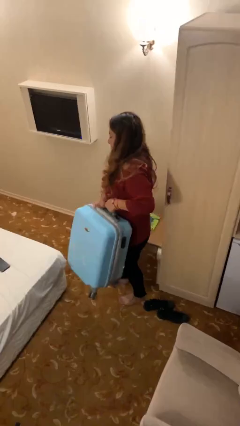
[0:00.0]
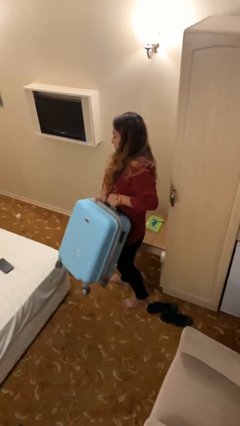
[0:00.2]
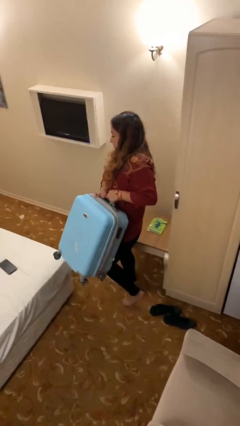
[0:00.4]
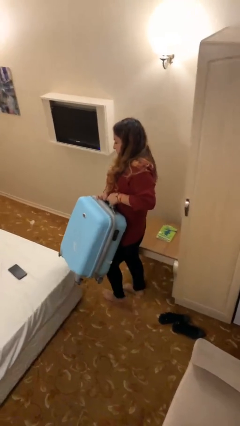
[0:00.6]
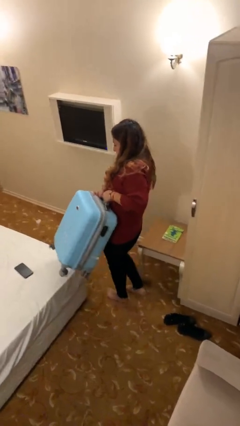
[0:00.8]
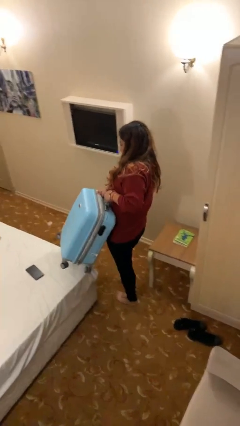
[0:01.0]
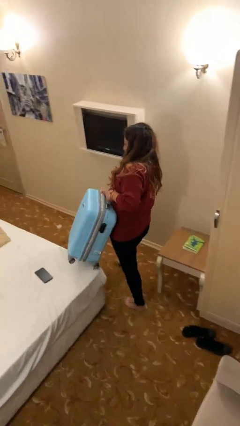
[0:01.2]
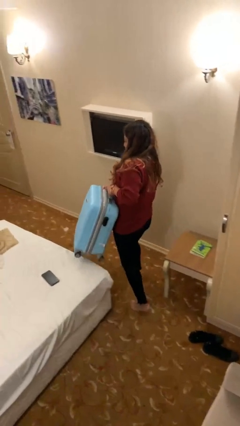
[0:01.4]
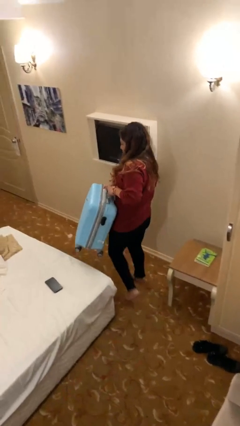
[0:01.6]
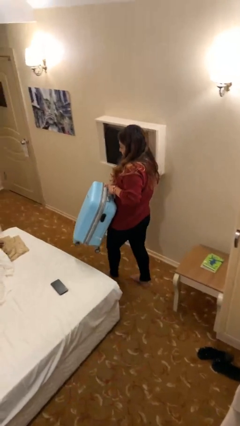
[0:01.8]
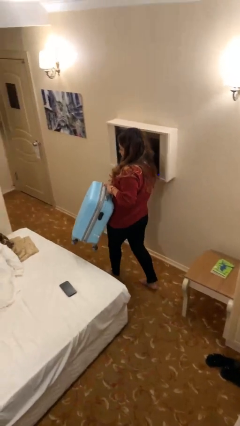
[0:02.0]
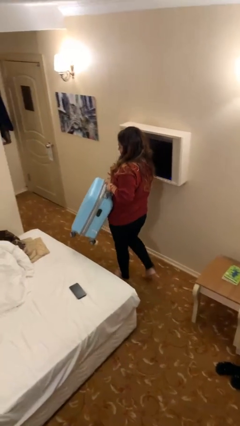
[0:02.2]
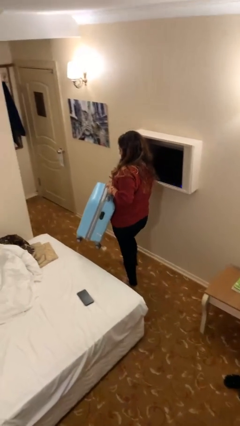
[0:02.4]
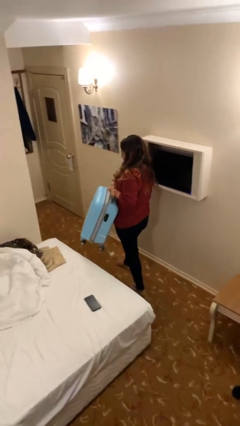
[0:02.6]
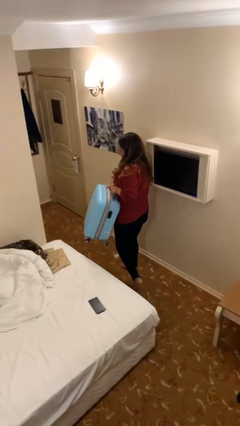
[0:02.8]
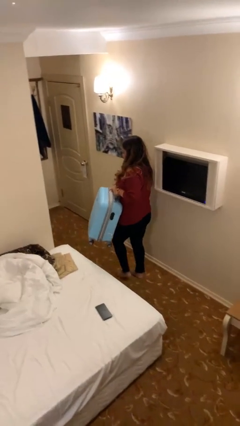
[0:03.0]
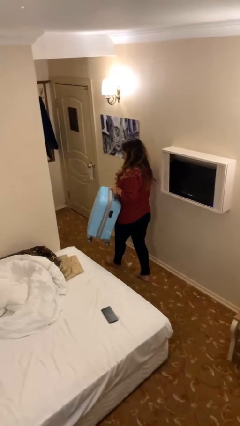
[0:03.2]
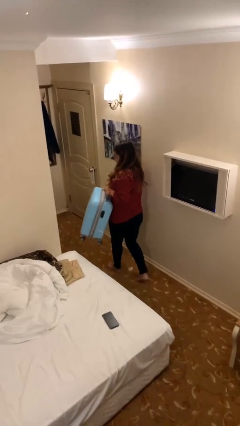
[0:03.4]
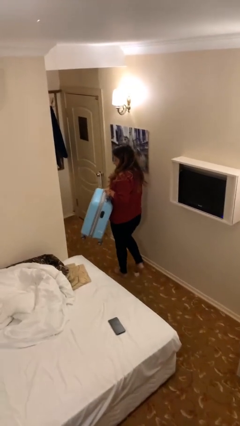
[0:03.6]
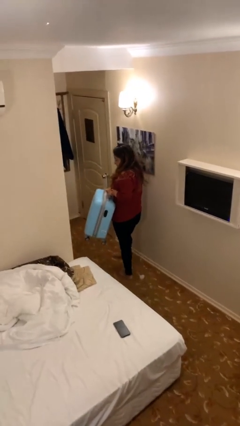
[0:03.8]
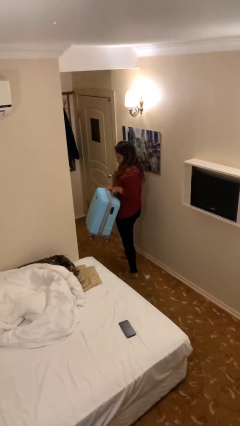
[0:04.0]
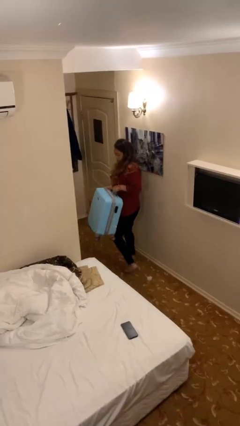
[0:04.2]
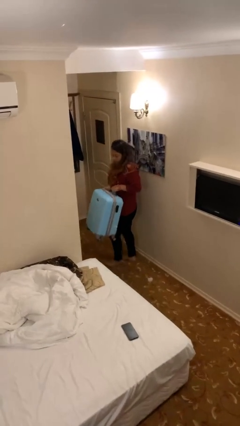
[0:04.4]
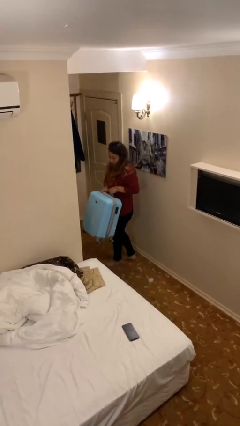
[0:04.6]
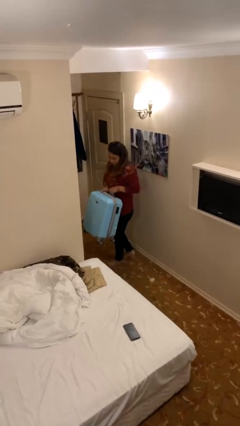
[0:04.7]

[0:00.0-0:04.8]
person carries heavy object

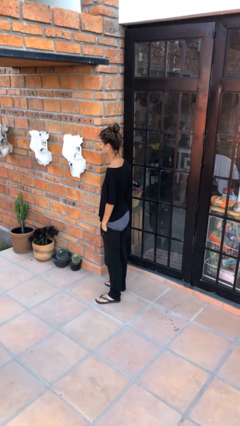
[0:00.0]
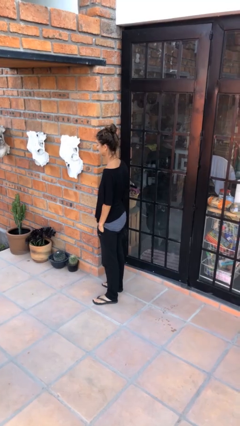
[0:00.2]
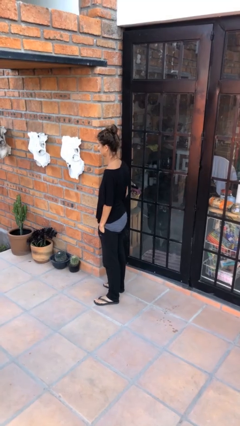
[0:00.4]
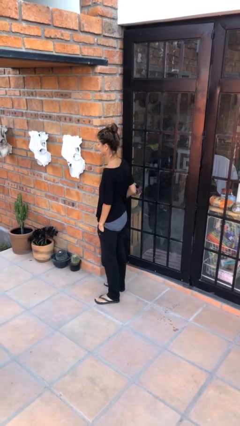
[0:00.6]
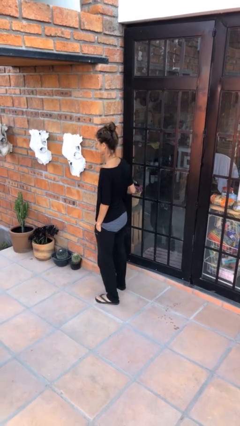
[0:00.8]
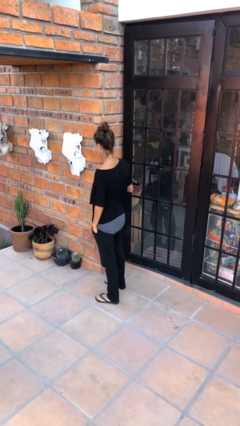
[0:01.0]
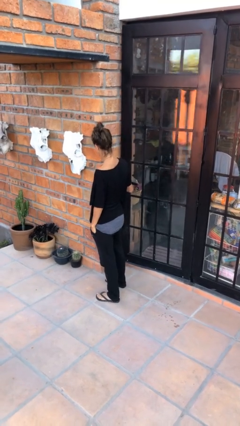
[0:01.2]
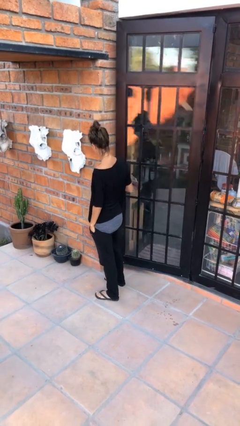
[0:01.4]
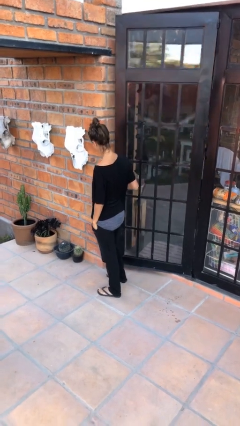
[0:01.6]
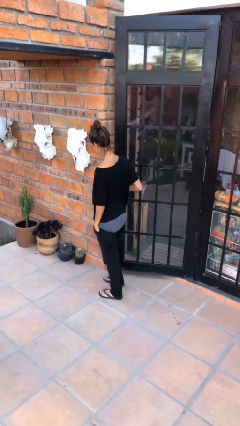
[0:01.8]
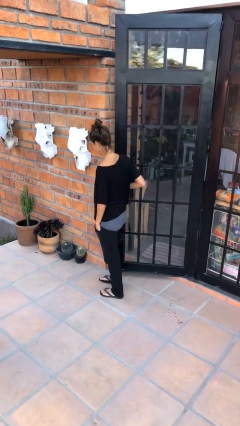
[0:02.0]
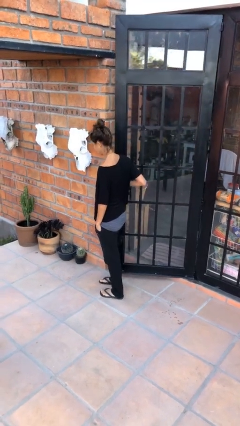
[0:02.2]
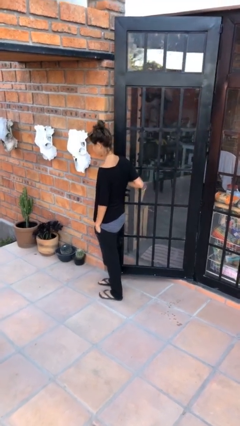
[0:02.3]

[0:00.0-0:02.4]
person opens facility door

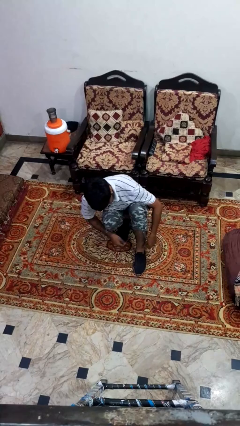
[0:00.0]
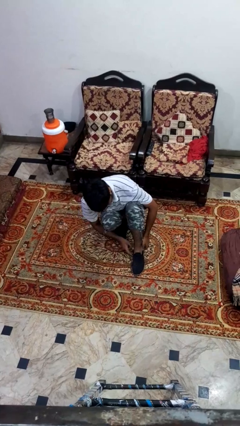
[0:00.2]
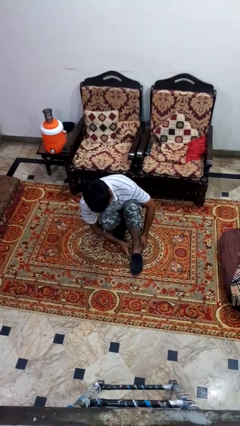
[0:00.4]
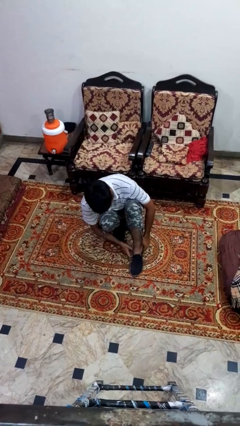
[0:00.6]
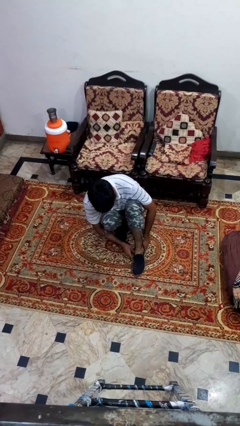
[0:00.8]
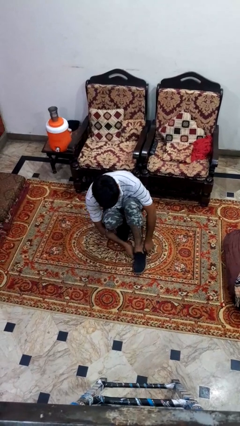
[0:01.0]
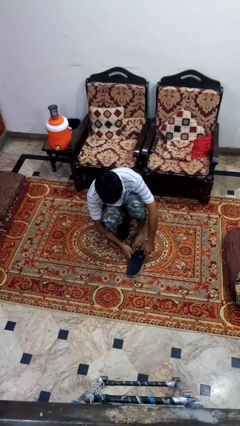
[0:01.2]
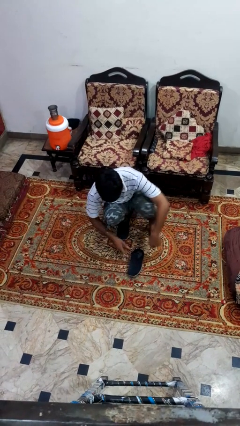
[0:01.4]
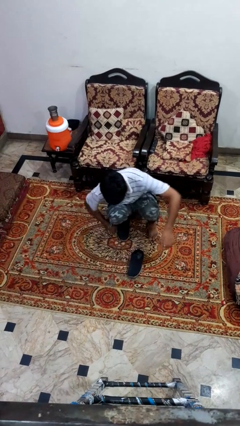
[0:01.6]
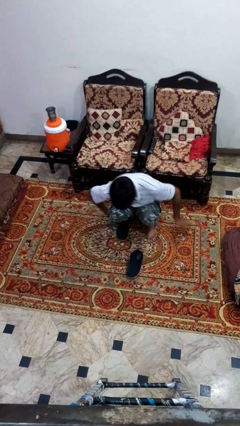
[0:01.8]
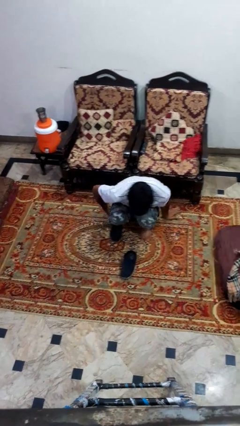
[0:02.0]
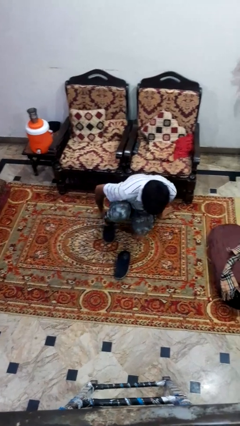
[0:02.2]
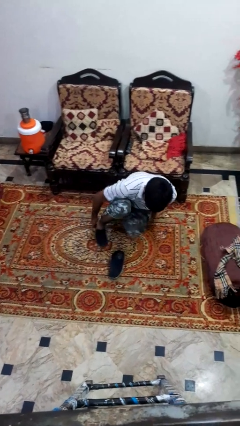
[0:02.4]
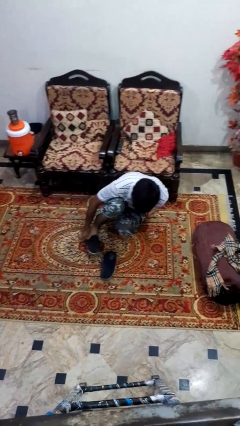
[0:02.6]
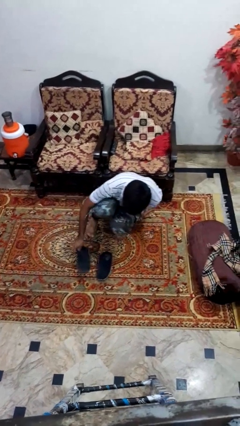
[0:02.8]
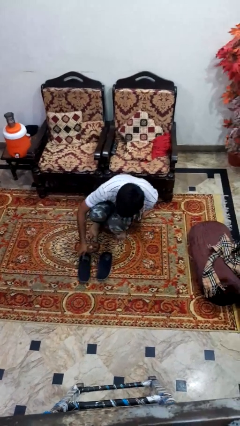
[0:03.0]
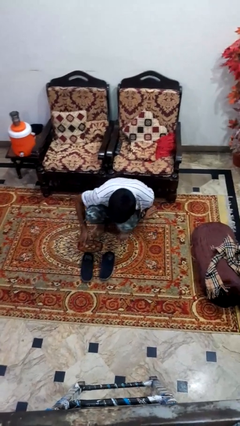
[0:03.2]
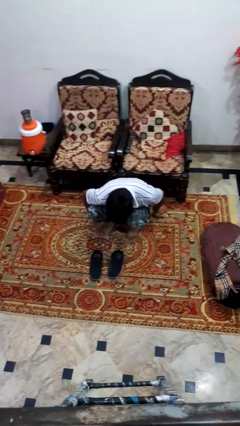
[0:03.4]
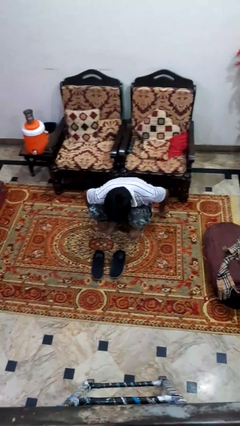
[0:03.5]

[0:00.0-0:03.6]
person takes off shoes

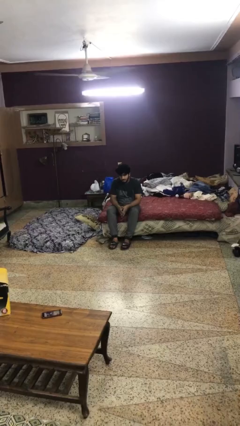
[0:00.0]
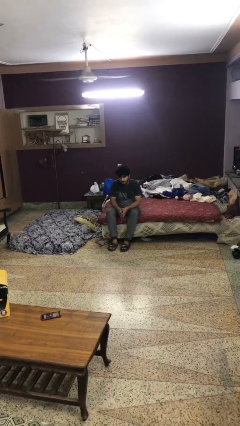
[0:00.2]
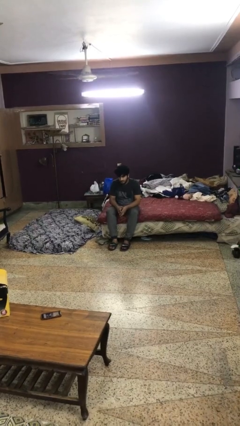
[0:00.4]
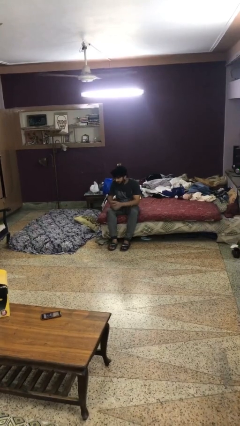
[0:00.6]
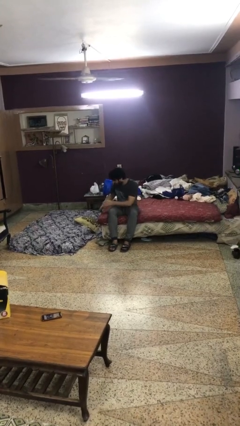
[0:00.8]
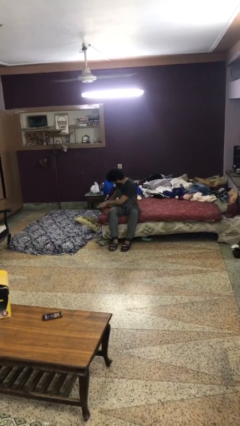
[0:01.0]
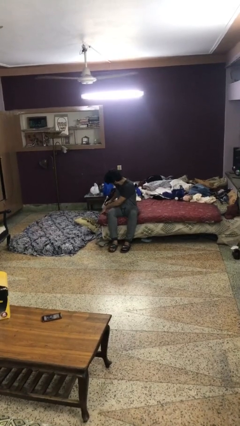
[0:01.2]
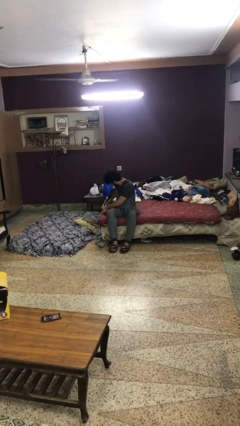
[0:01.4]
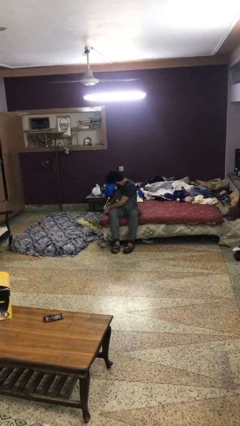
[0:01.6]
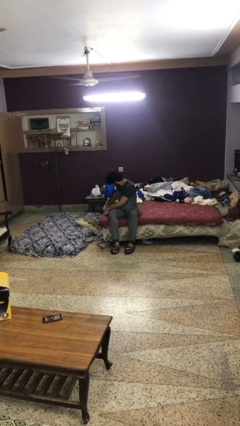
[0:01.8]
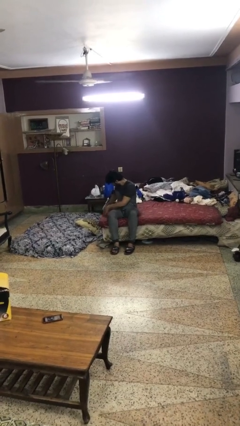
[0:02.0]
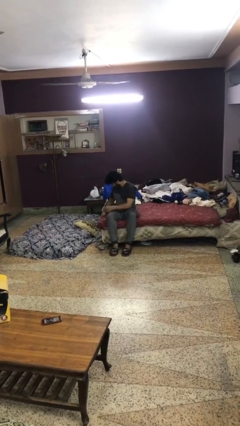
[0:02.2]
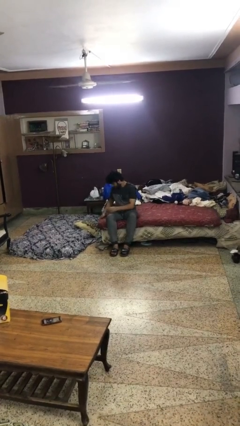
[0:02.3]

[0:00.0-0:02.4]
person searches under bed

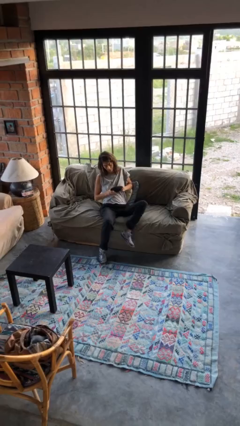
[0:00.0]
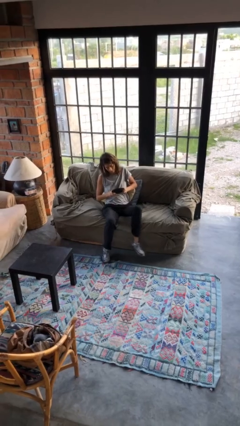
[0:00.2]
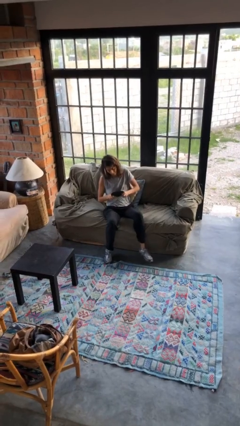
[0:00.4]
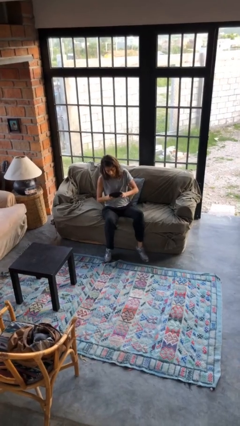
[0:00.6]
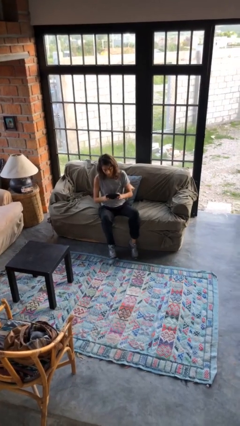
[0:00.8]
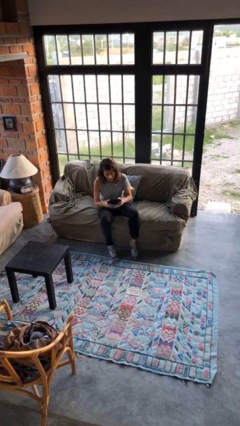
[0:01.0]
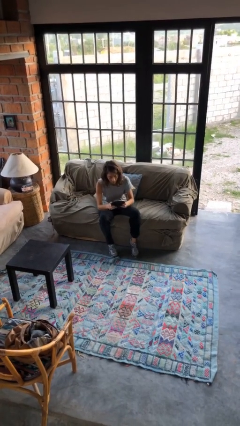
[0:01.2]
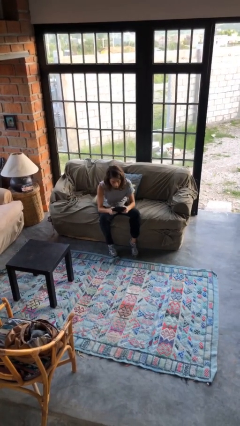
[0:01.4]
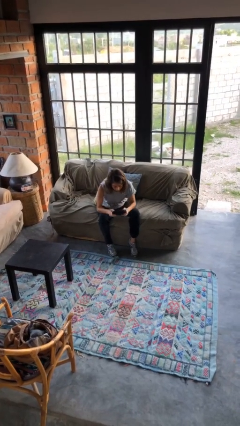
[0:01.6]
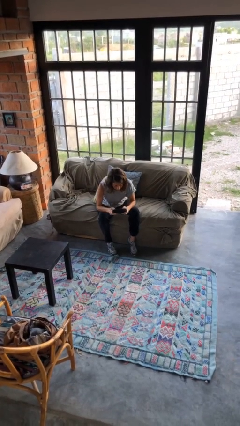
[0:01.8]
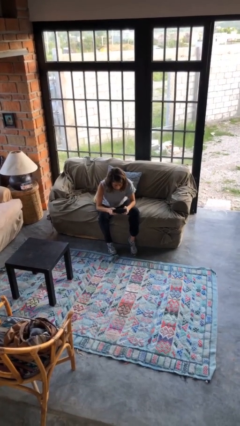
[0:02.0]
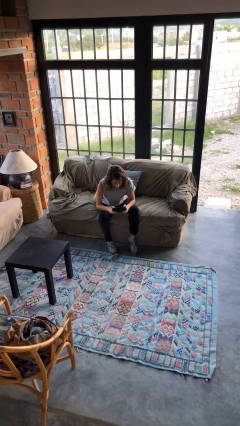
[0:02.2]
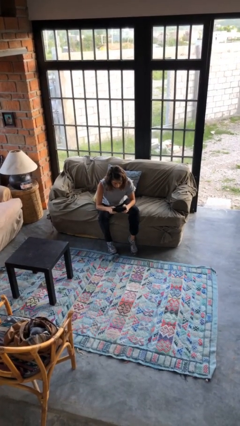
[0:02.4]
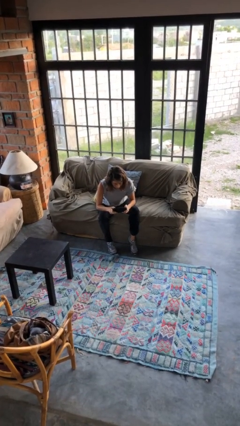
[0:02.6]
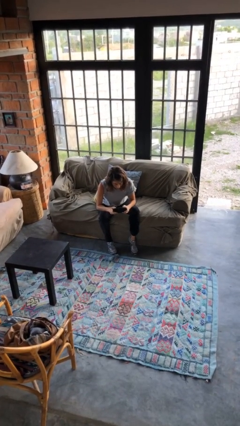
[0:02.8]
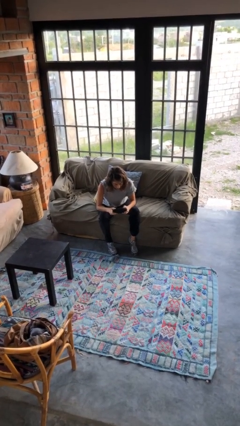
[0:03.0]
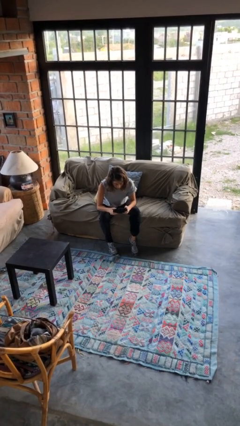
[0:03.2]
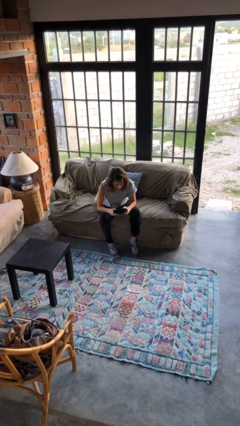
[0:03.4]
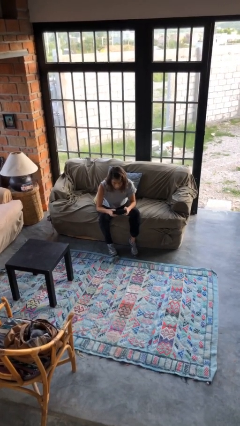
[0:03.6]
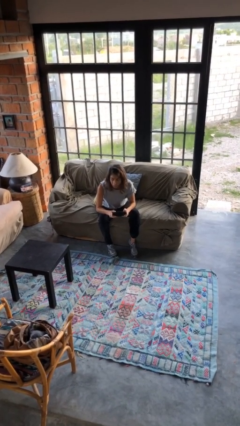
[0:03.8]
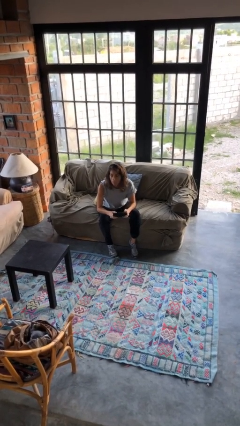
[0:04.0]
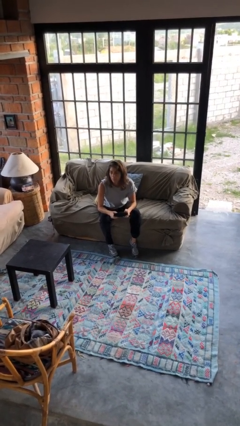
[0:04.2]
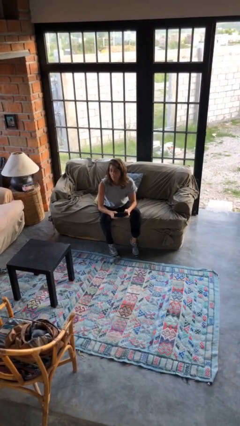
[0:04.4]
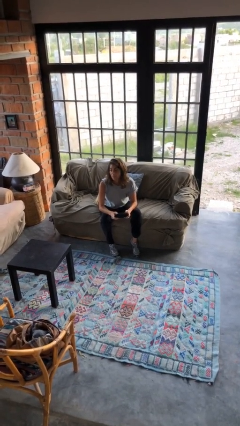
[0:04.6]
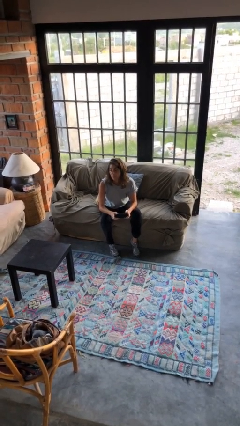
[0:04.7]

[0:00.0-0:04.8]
person interacts with handheld game
